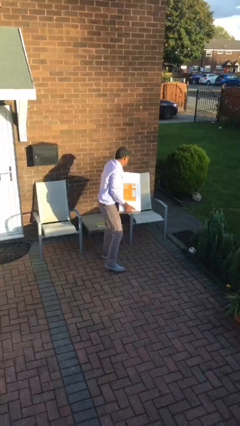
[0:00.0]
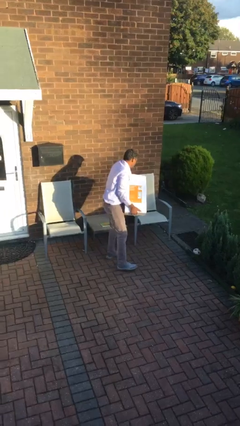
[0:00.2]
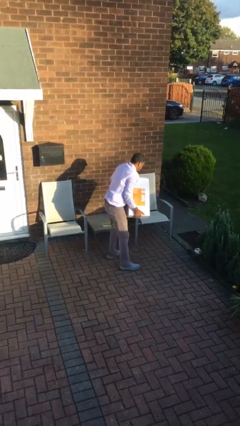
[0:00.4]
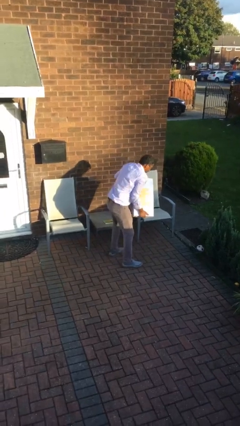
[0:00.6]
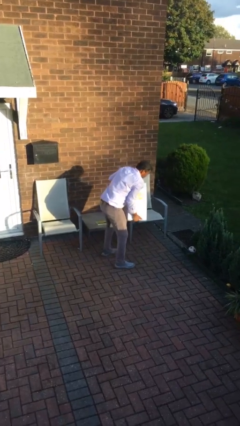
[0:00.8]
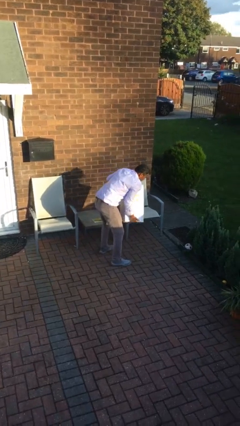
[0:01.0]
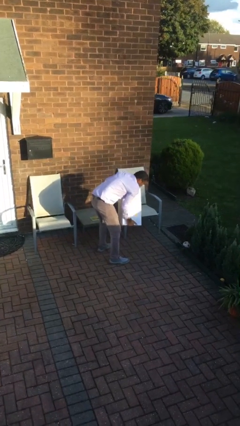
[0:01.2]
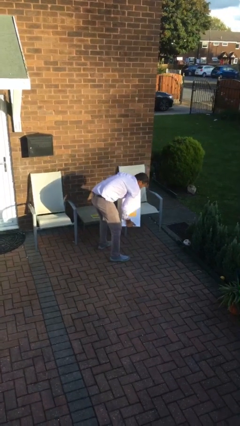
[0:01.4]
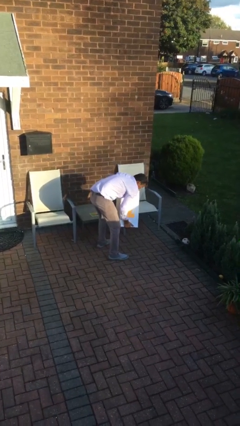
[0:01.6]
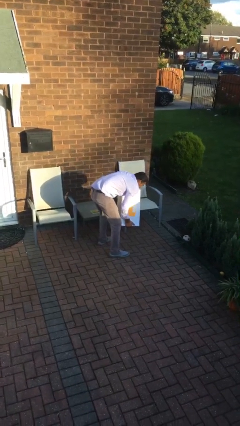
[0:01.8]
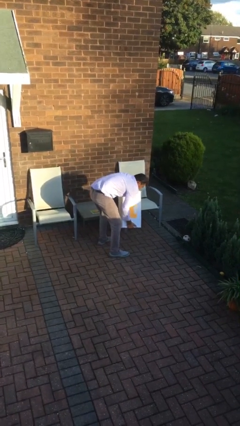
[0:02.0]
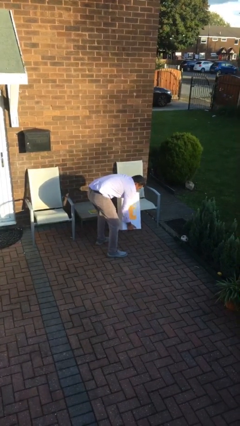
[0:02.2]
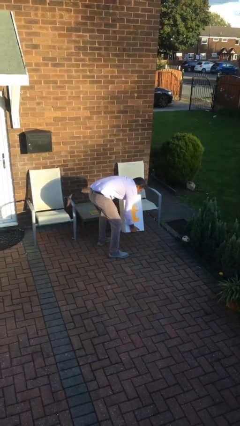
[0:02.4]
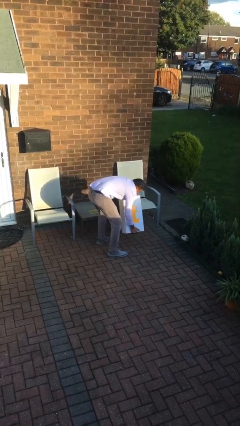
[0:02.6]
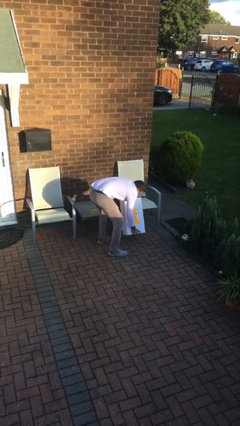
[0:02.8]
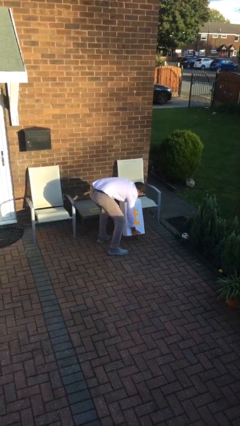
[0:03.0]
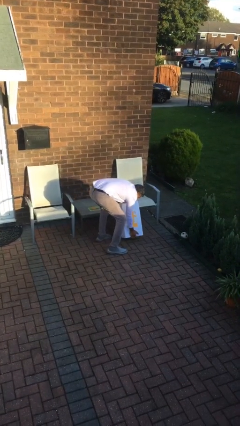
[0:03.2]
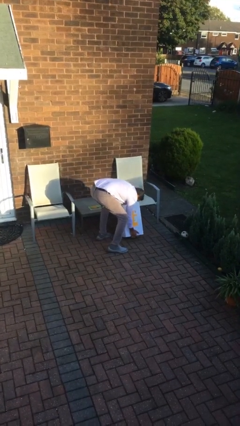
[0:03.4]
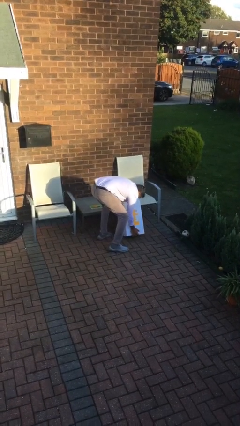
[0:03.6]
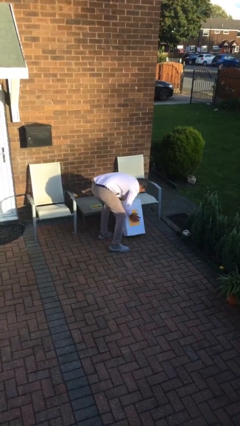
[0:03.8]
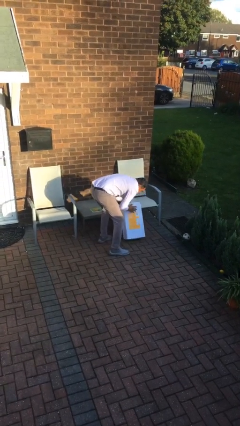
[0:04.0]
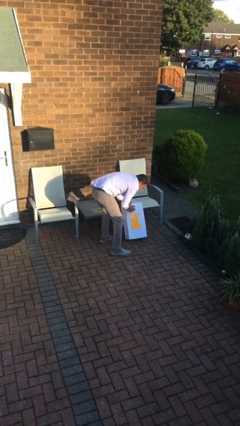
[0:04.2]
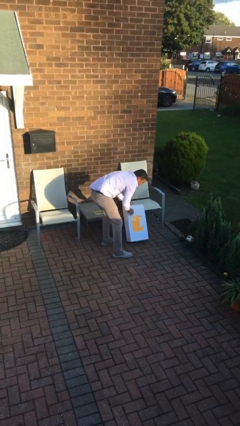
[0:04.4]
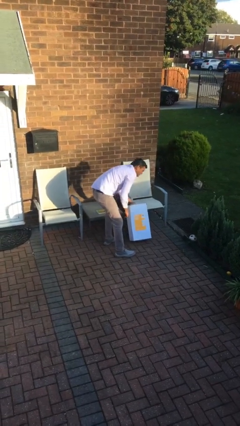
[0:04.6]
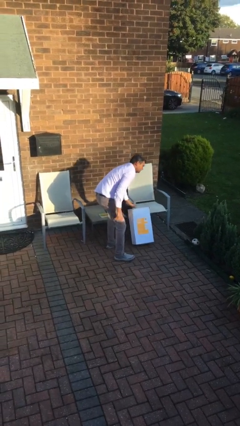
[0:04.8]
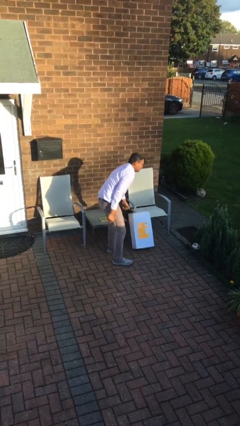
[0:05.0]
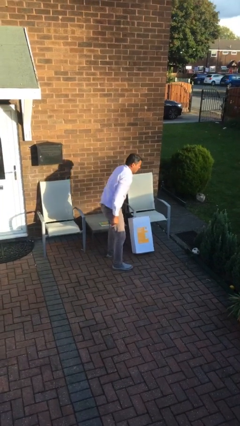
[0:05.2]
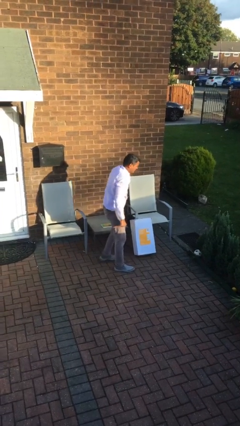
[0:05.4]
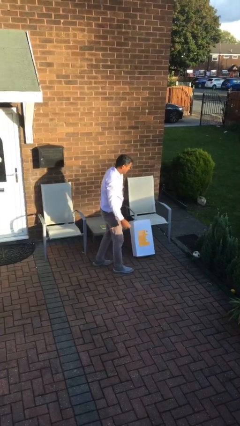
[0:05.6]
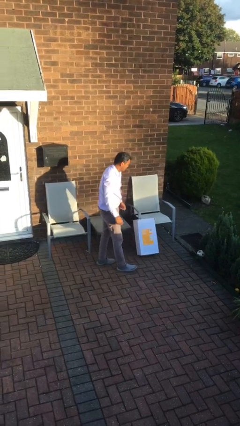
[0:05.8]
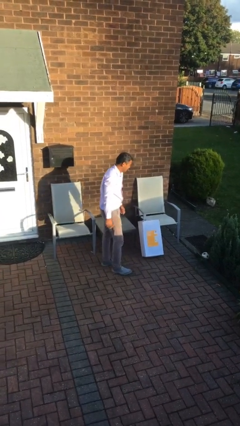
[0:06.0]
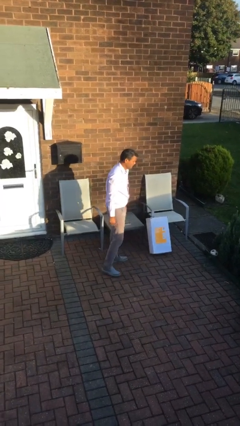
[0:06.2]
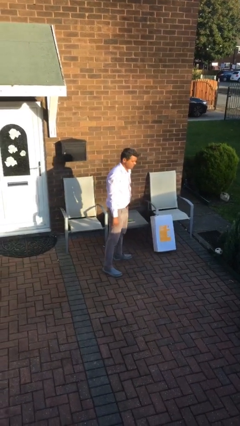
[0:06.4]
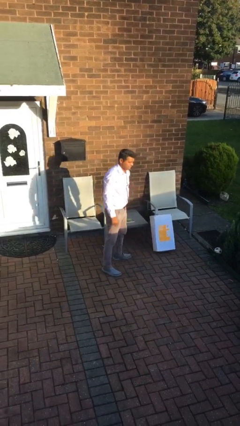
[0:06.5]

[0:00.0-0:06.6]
person puts down object on floor

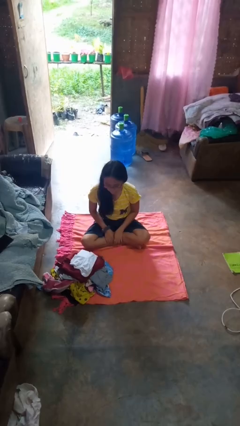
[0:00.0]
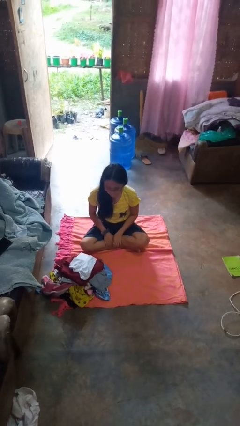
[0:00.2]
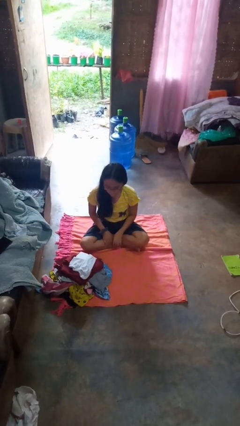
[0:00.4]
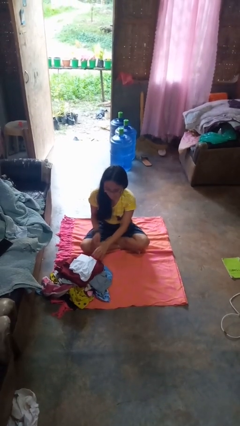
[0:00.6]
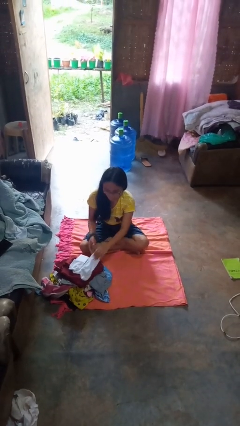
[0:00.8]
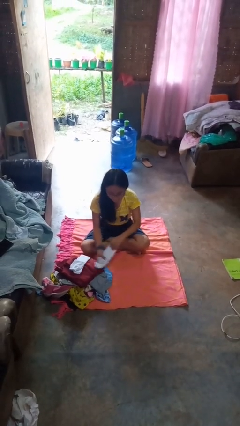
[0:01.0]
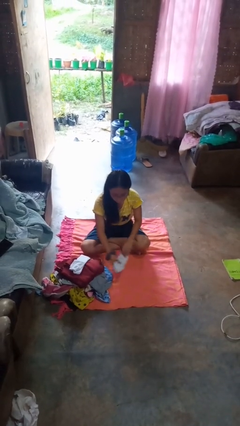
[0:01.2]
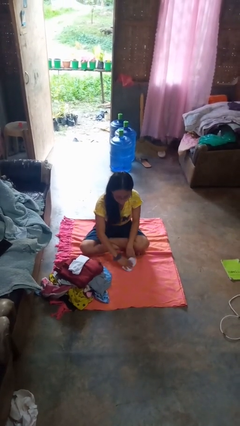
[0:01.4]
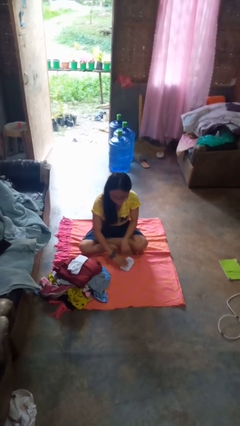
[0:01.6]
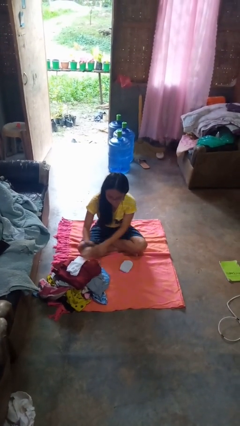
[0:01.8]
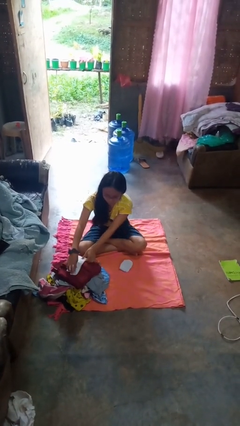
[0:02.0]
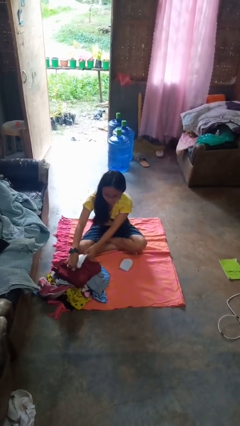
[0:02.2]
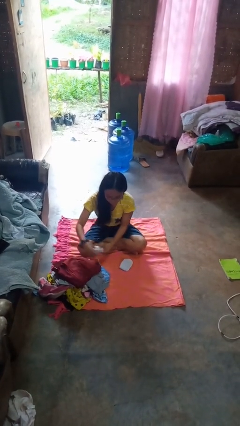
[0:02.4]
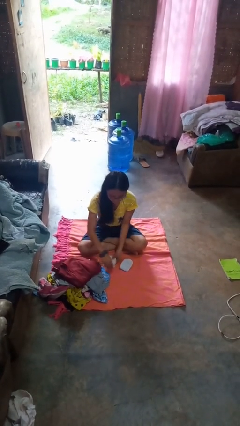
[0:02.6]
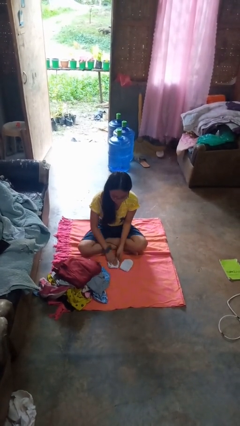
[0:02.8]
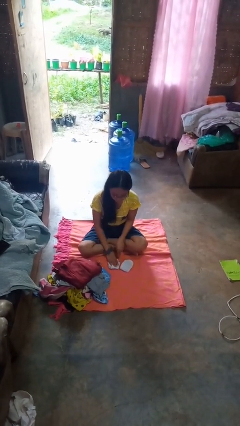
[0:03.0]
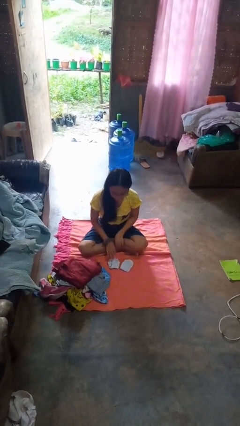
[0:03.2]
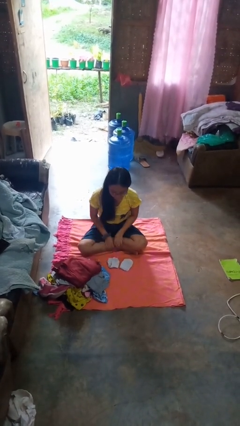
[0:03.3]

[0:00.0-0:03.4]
person folds socks

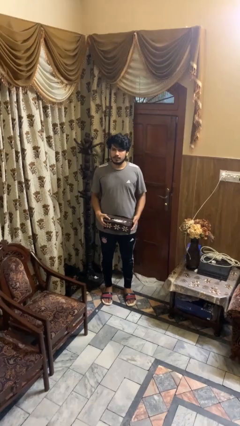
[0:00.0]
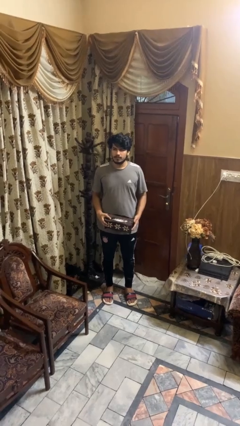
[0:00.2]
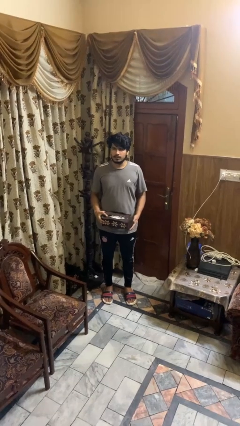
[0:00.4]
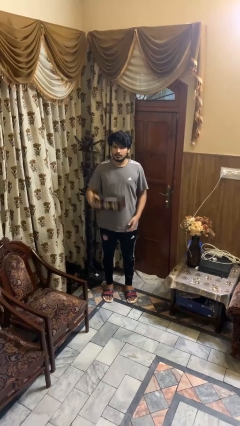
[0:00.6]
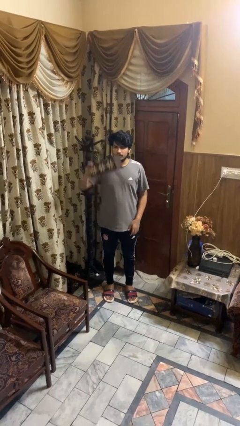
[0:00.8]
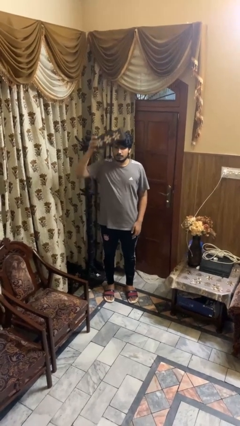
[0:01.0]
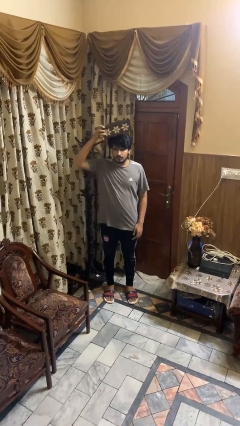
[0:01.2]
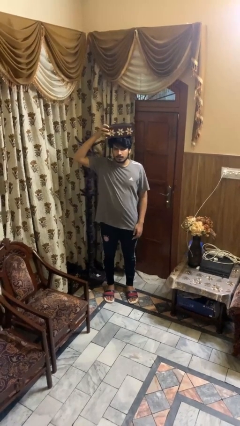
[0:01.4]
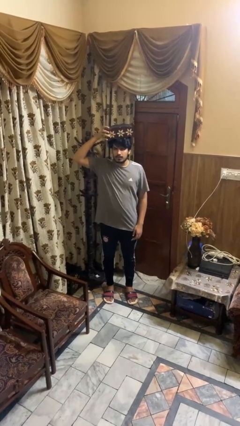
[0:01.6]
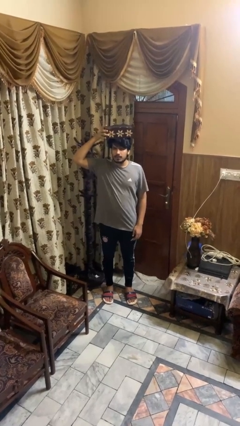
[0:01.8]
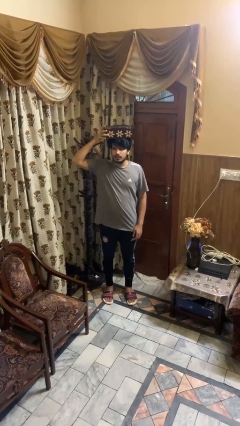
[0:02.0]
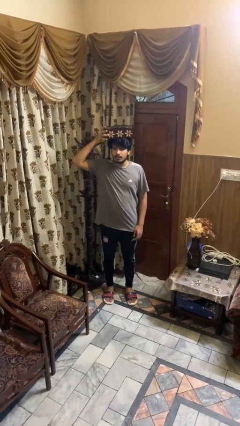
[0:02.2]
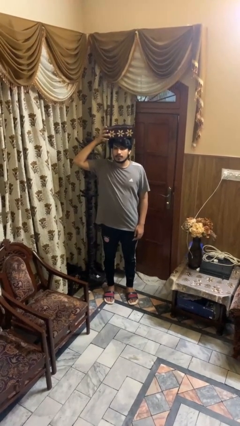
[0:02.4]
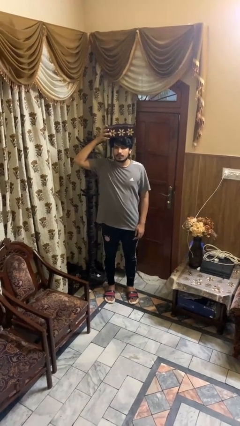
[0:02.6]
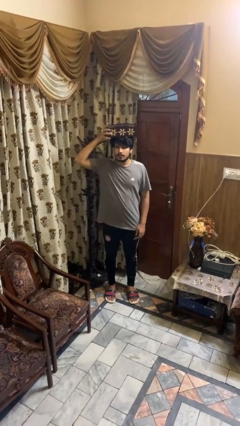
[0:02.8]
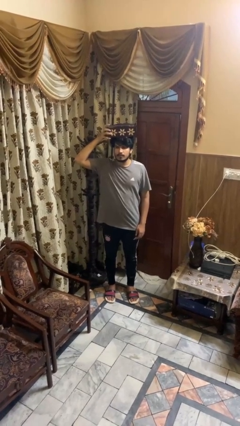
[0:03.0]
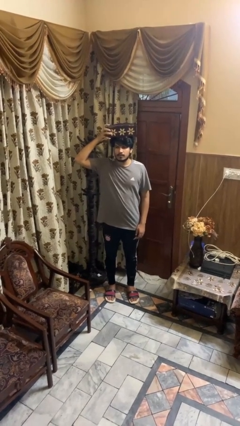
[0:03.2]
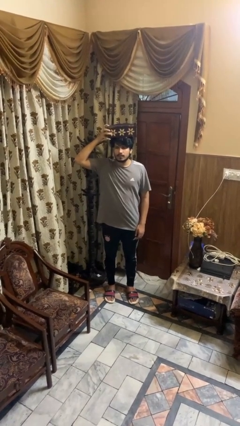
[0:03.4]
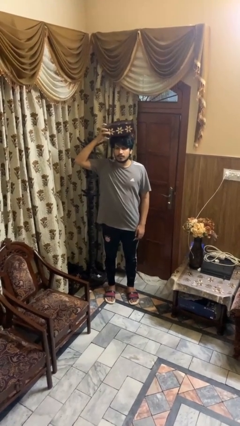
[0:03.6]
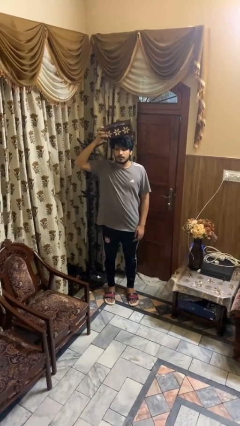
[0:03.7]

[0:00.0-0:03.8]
person holds object above head

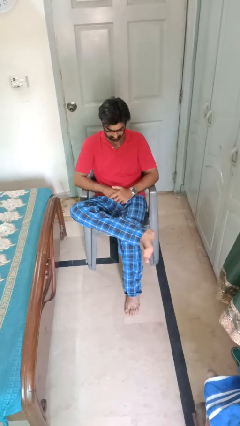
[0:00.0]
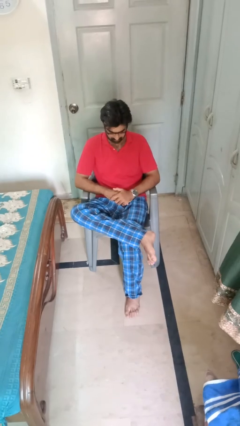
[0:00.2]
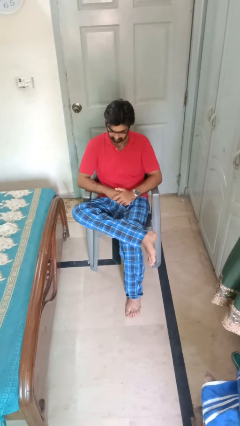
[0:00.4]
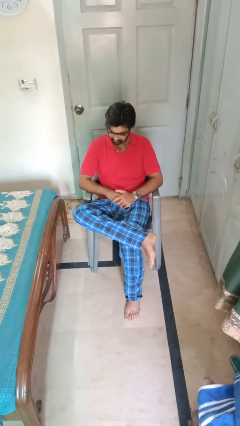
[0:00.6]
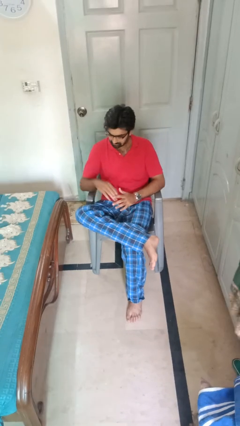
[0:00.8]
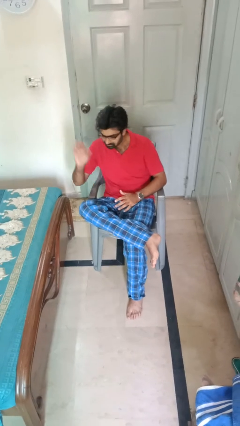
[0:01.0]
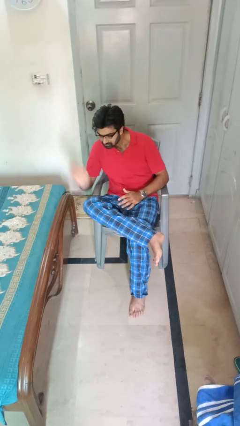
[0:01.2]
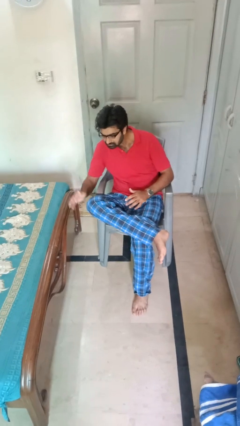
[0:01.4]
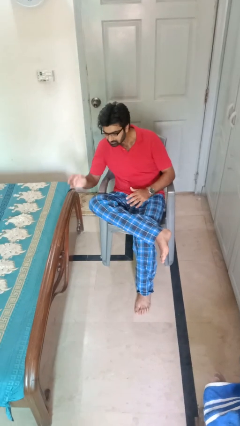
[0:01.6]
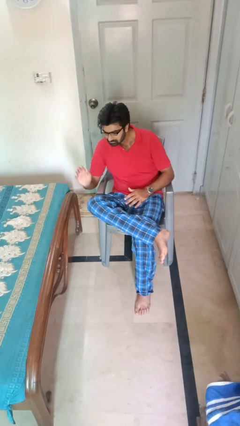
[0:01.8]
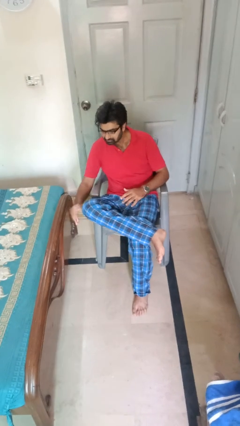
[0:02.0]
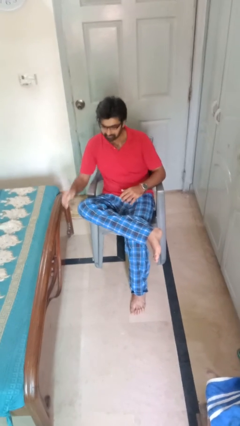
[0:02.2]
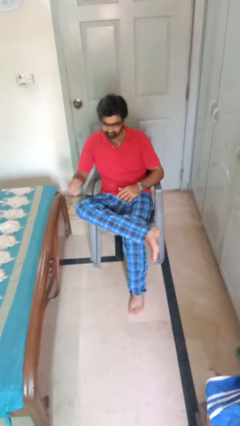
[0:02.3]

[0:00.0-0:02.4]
person swats bug

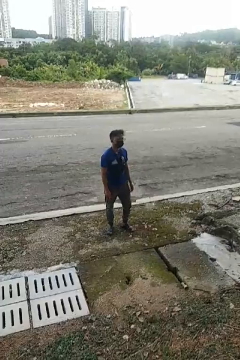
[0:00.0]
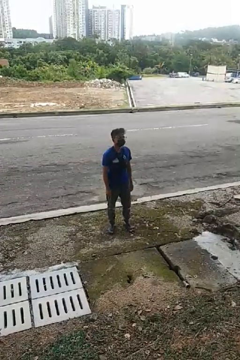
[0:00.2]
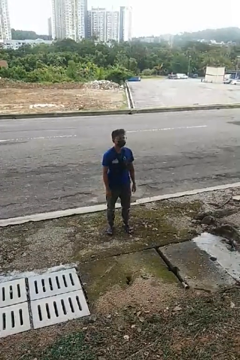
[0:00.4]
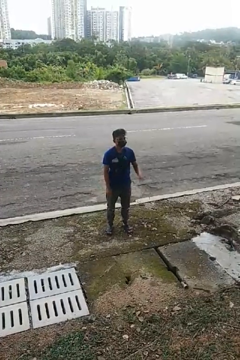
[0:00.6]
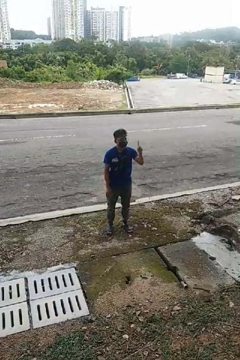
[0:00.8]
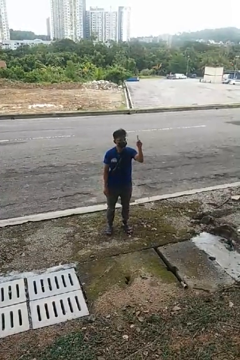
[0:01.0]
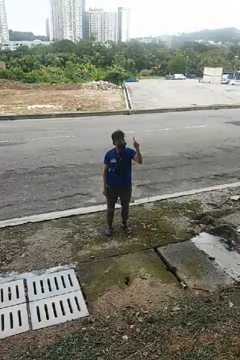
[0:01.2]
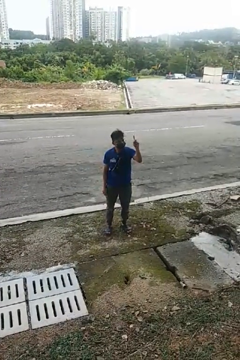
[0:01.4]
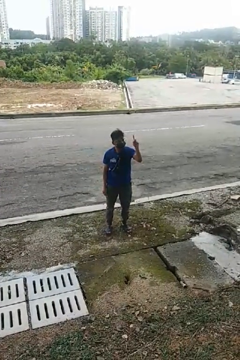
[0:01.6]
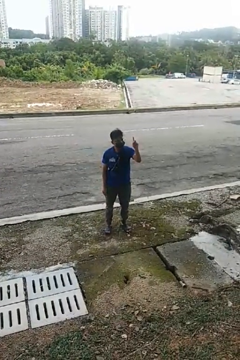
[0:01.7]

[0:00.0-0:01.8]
person gestures number one
